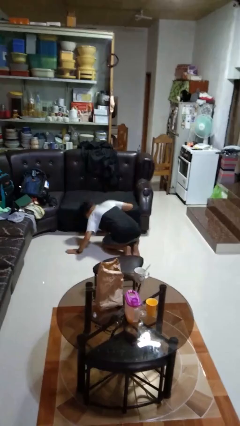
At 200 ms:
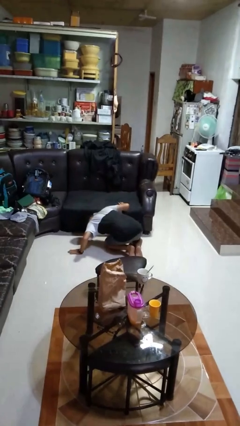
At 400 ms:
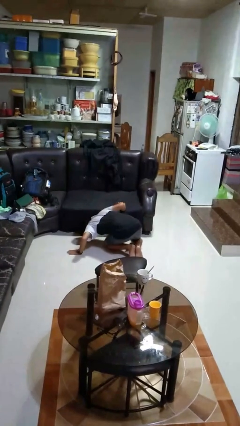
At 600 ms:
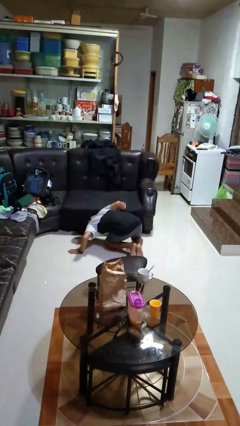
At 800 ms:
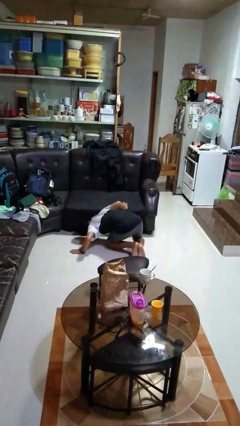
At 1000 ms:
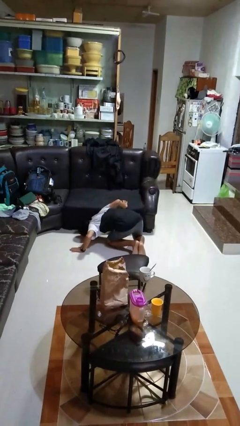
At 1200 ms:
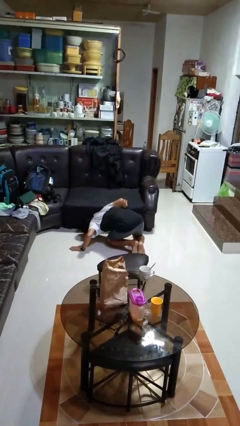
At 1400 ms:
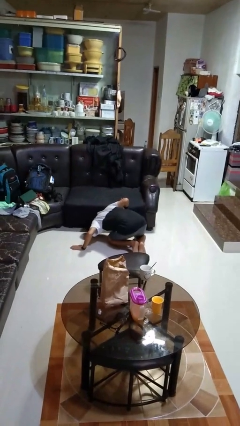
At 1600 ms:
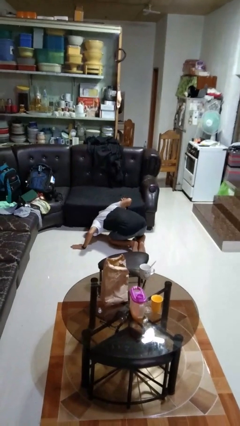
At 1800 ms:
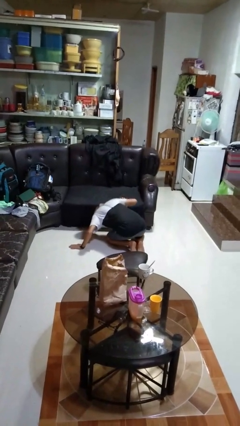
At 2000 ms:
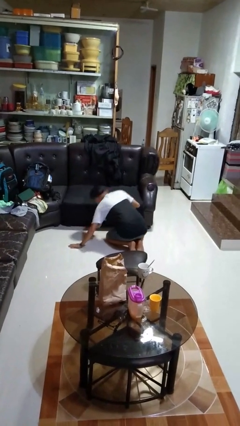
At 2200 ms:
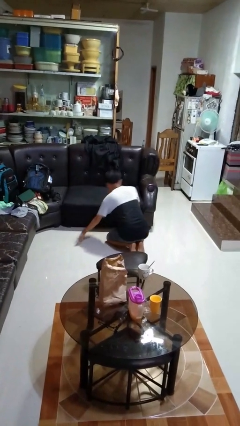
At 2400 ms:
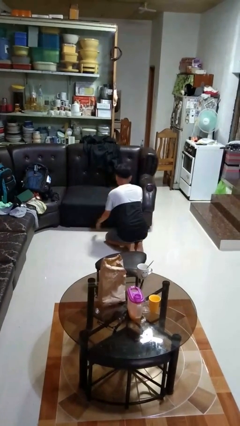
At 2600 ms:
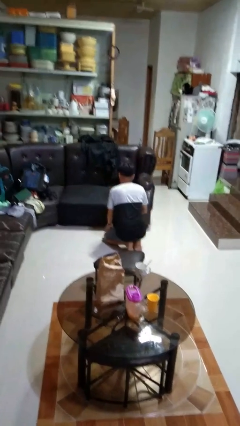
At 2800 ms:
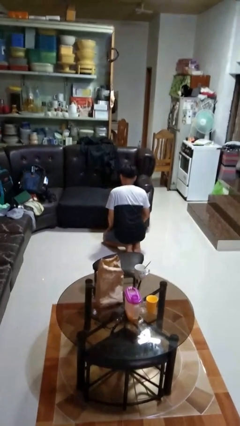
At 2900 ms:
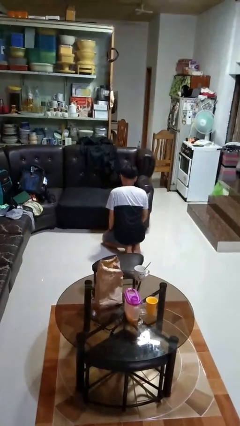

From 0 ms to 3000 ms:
person searches under couch

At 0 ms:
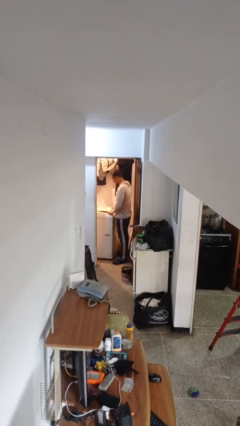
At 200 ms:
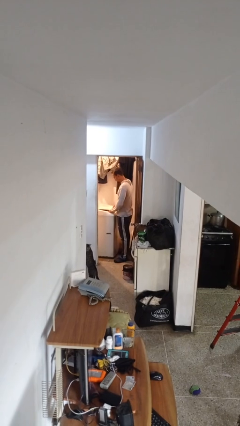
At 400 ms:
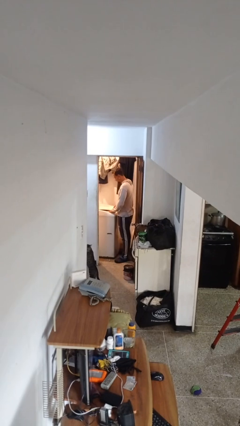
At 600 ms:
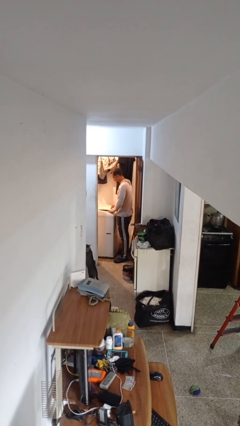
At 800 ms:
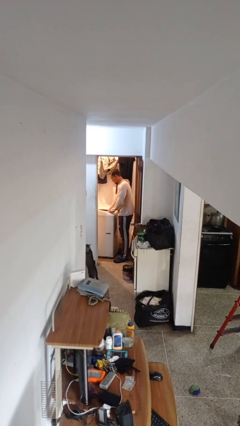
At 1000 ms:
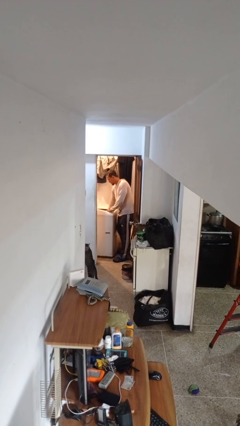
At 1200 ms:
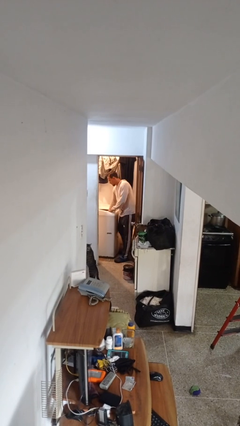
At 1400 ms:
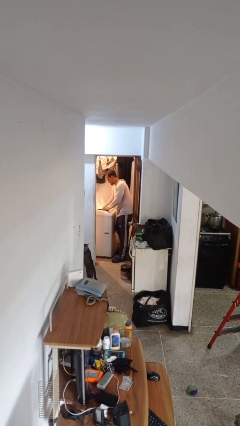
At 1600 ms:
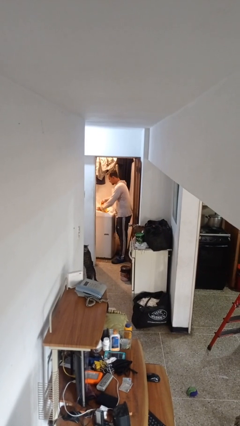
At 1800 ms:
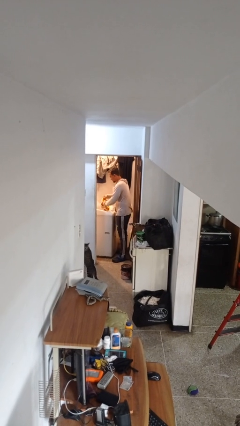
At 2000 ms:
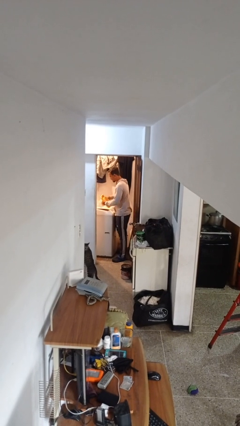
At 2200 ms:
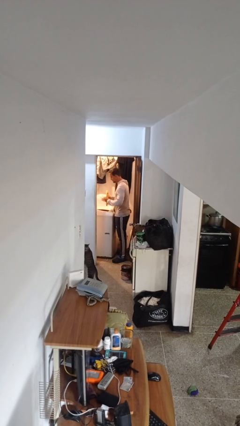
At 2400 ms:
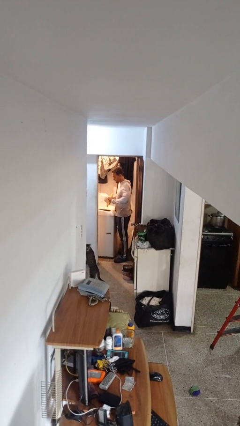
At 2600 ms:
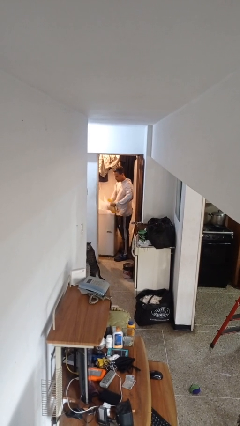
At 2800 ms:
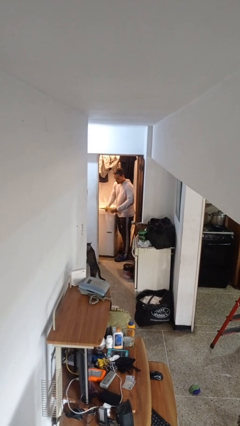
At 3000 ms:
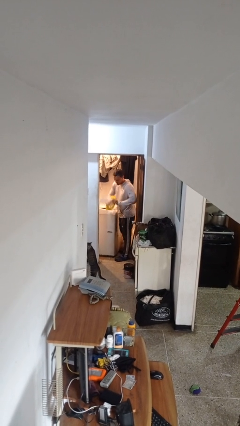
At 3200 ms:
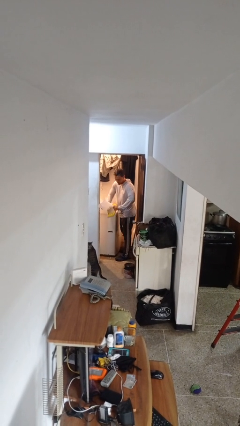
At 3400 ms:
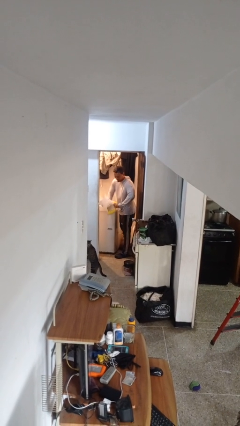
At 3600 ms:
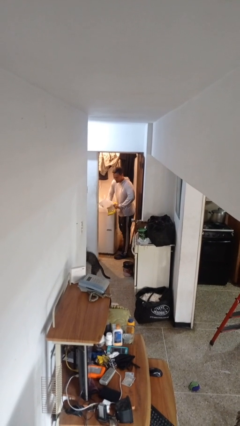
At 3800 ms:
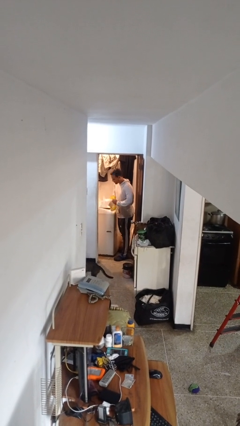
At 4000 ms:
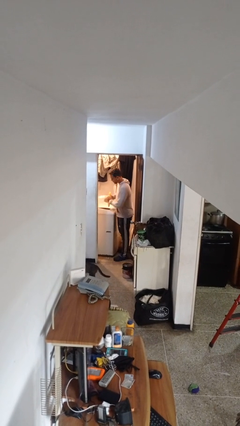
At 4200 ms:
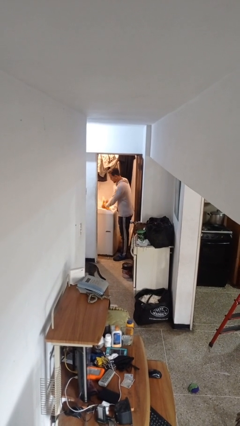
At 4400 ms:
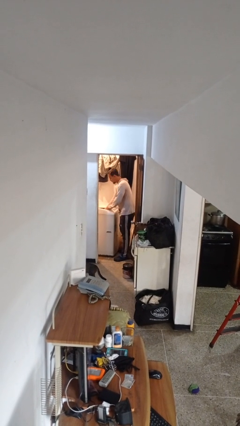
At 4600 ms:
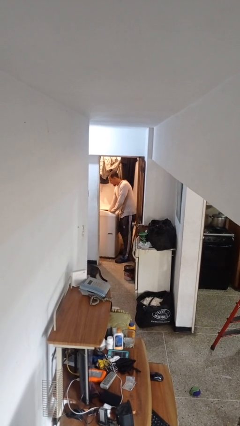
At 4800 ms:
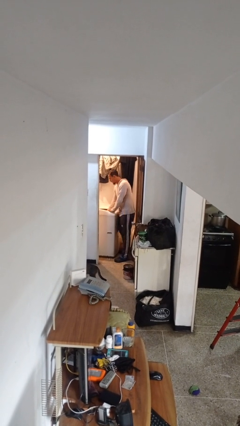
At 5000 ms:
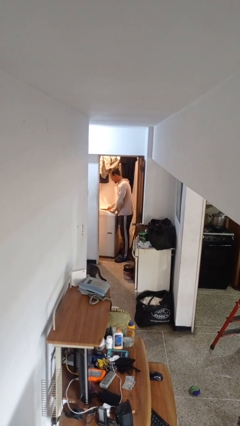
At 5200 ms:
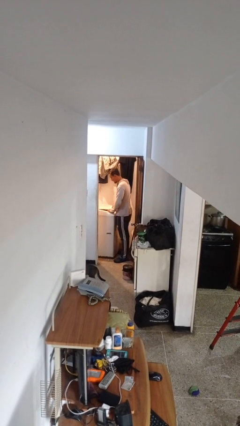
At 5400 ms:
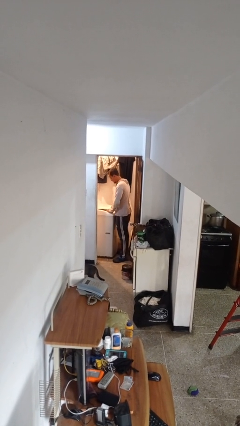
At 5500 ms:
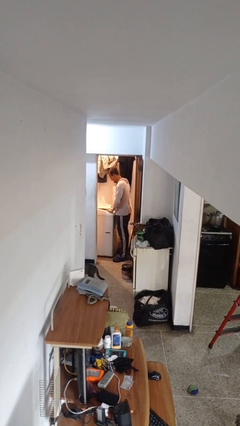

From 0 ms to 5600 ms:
person cleans dryer lint trap

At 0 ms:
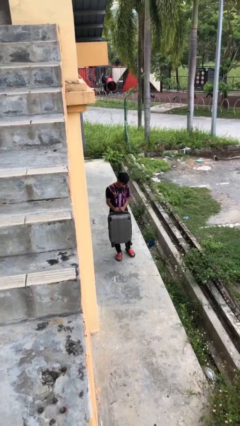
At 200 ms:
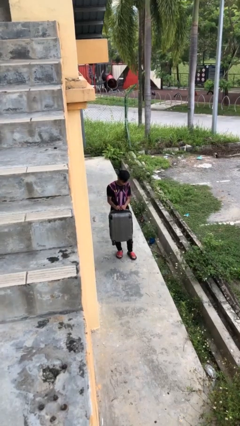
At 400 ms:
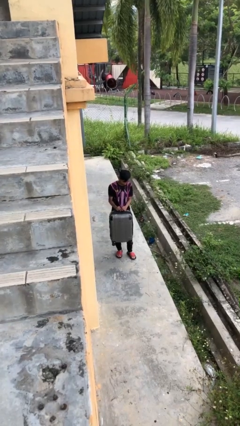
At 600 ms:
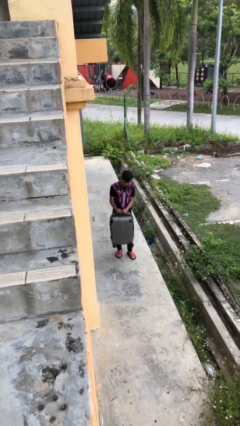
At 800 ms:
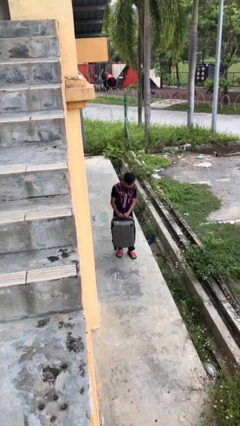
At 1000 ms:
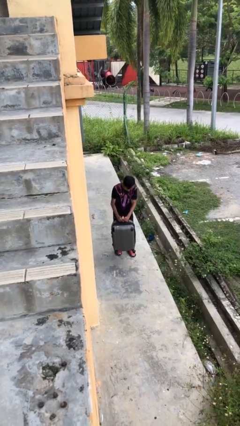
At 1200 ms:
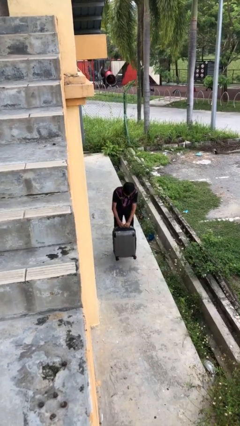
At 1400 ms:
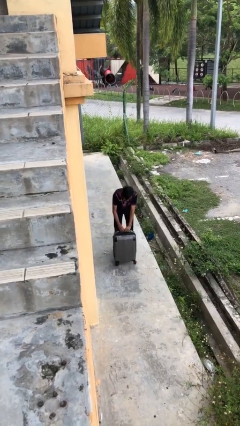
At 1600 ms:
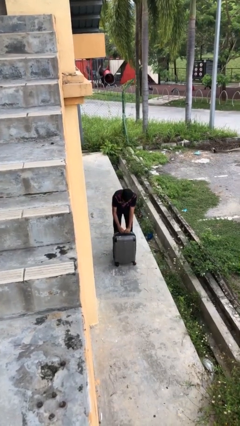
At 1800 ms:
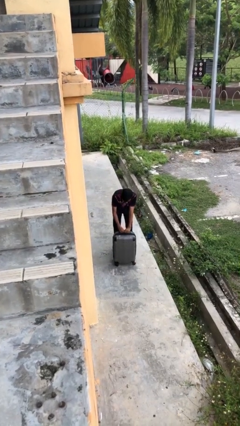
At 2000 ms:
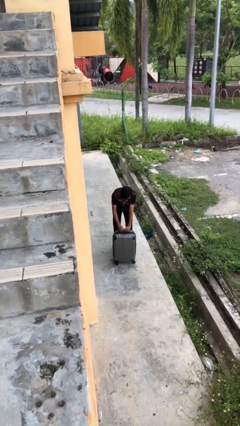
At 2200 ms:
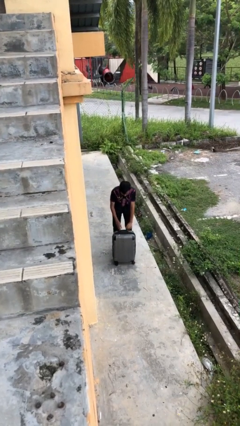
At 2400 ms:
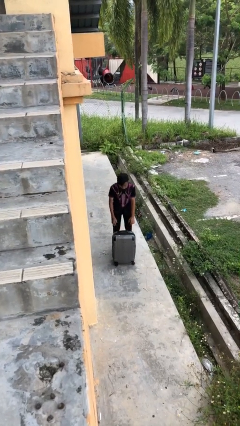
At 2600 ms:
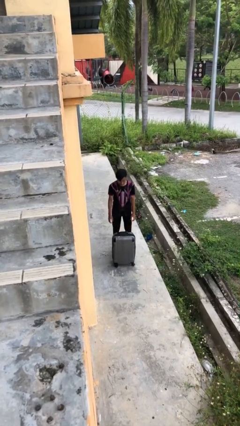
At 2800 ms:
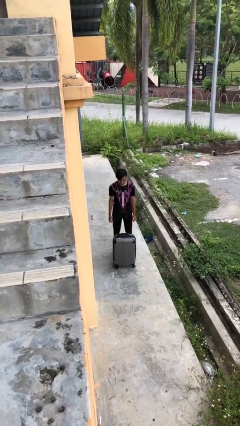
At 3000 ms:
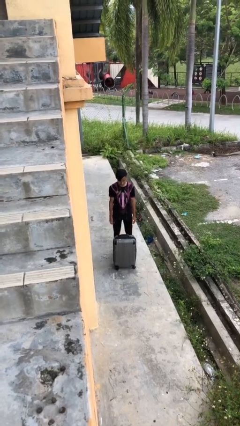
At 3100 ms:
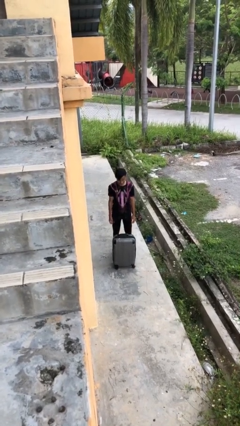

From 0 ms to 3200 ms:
person puts down object on floor

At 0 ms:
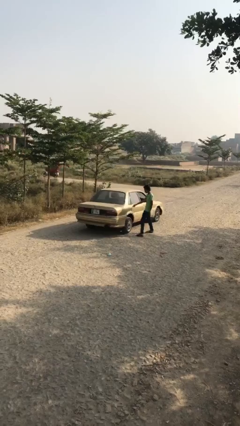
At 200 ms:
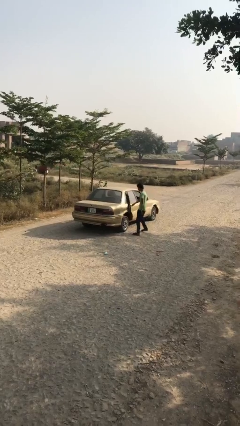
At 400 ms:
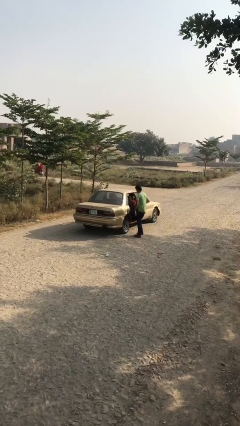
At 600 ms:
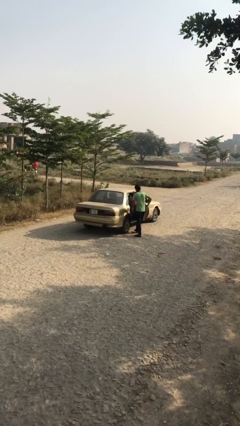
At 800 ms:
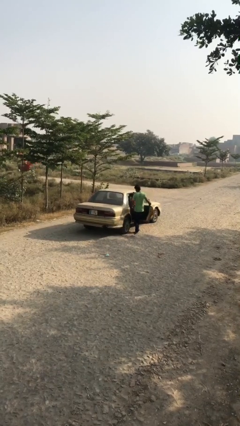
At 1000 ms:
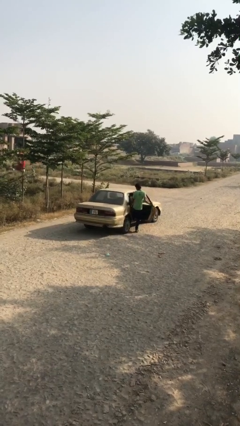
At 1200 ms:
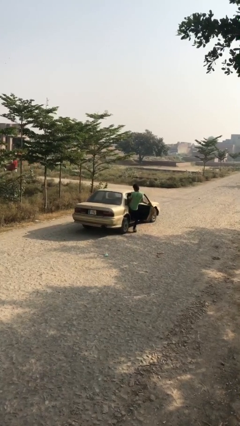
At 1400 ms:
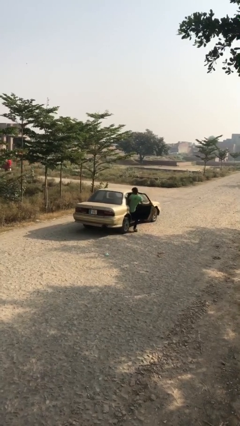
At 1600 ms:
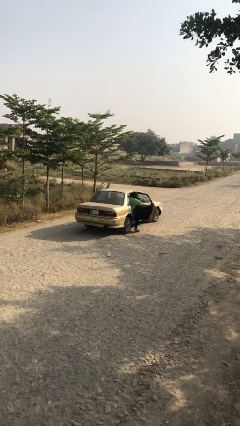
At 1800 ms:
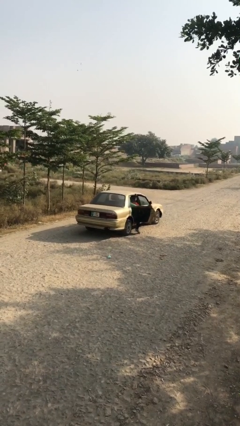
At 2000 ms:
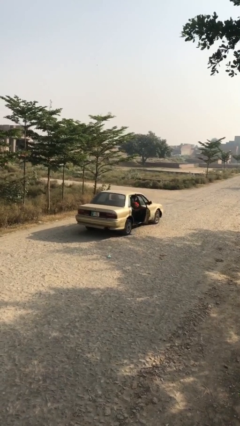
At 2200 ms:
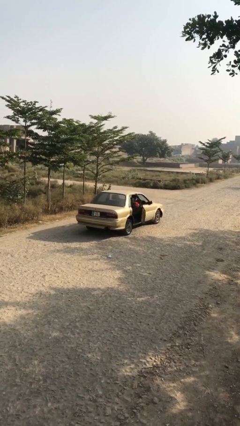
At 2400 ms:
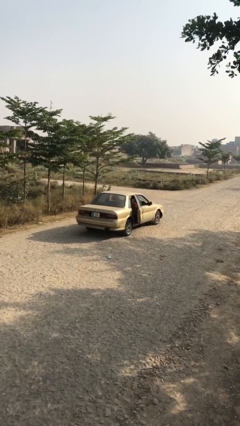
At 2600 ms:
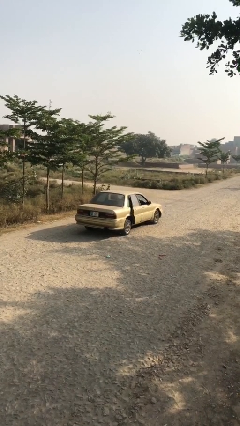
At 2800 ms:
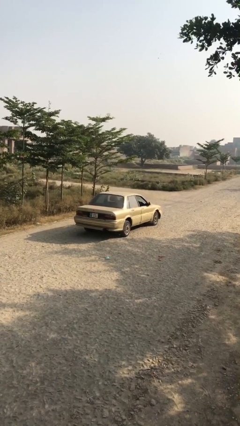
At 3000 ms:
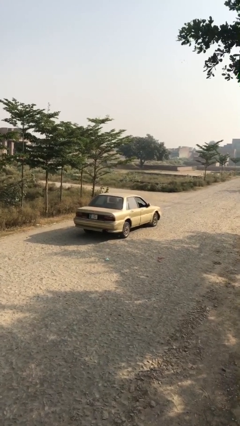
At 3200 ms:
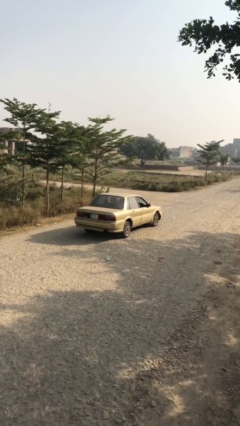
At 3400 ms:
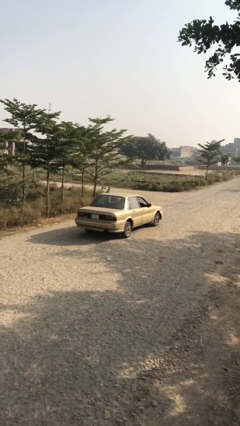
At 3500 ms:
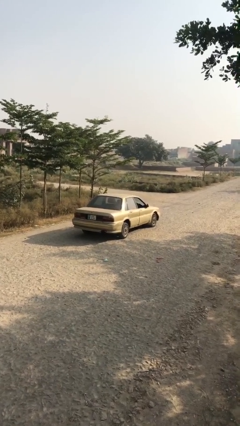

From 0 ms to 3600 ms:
car picks up person

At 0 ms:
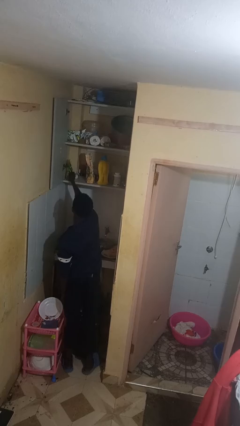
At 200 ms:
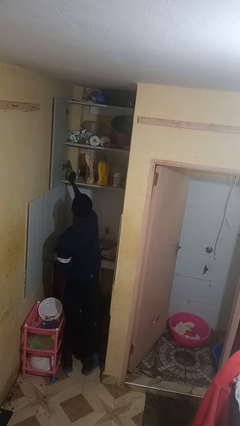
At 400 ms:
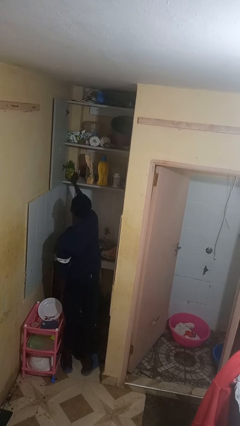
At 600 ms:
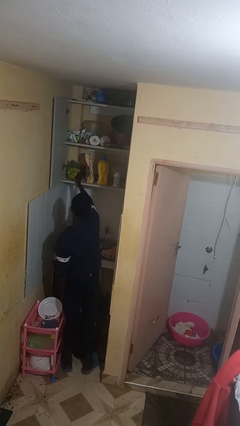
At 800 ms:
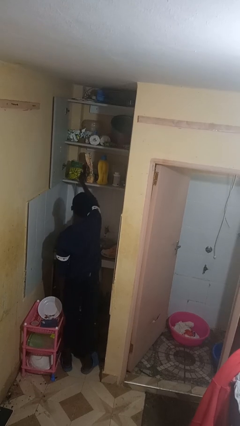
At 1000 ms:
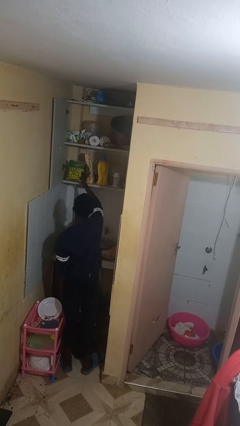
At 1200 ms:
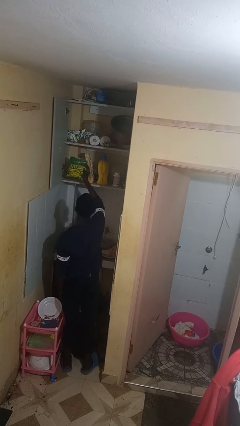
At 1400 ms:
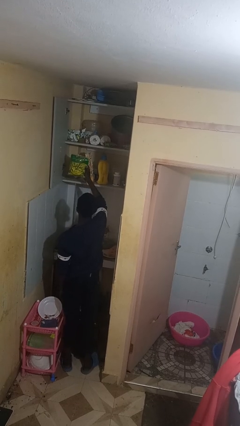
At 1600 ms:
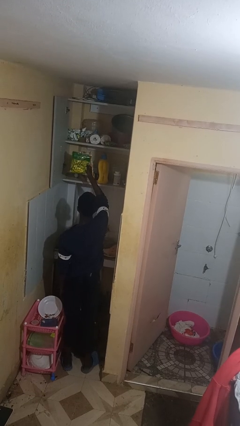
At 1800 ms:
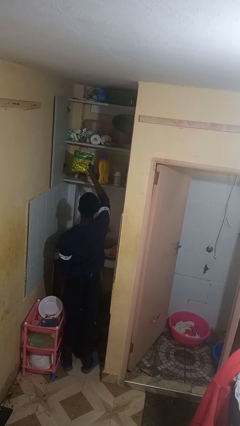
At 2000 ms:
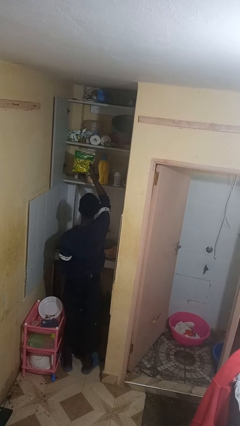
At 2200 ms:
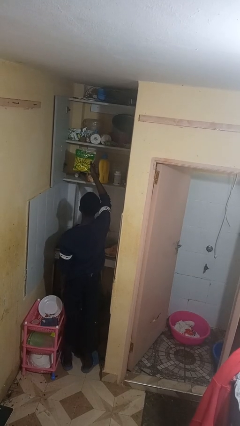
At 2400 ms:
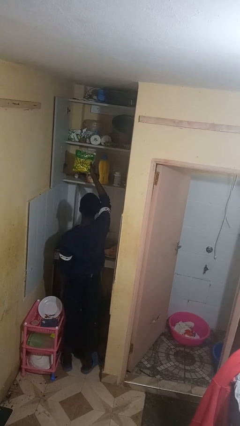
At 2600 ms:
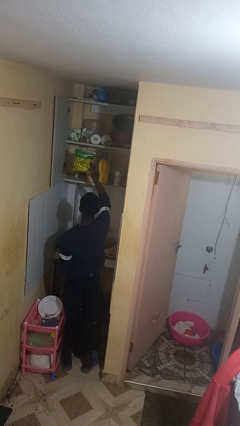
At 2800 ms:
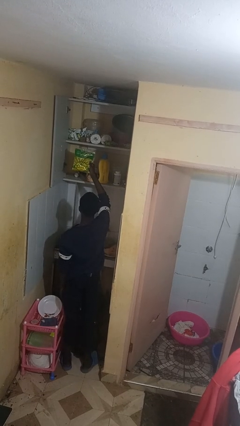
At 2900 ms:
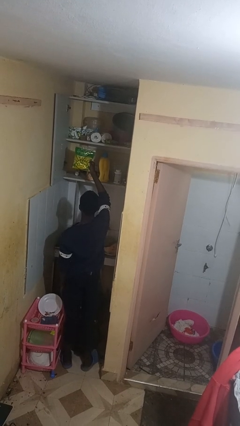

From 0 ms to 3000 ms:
person takes object from cabinet
